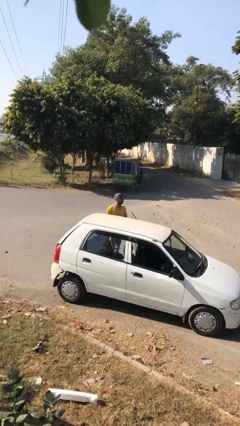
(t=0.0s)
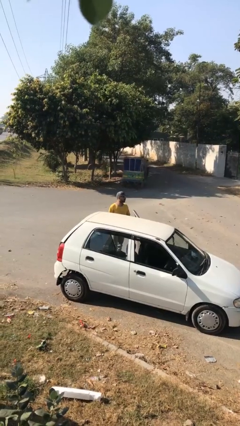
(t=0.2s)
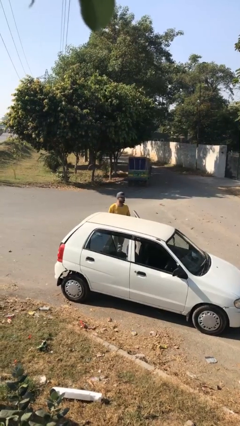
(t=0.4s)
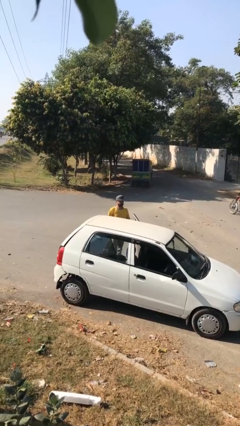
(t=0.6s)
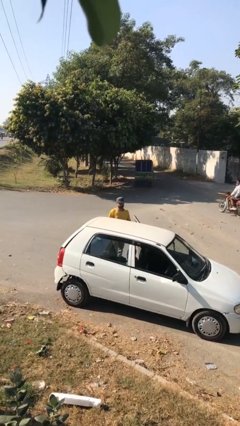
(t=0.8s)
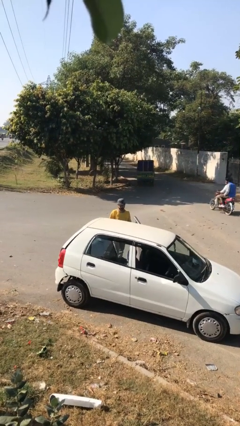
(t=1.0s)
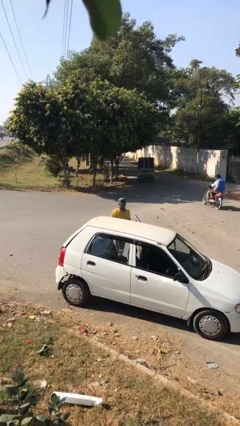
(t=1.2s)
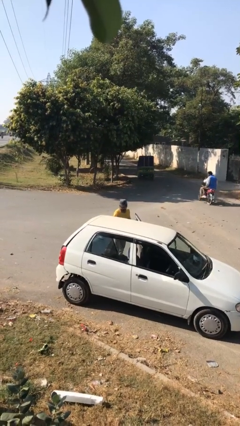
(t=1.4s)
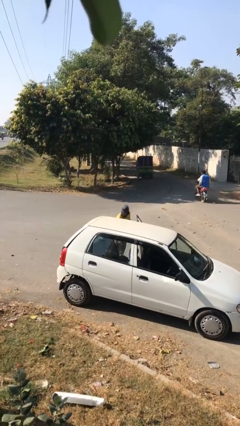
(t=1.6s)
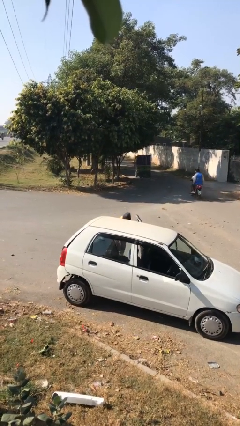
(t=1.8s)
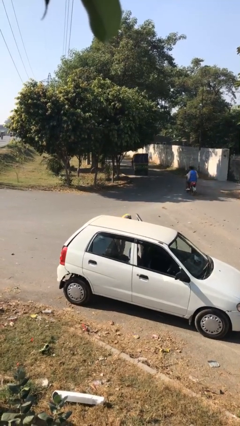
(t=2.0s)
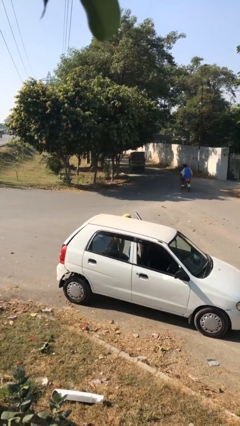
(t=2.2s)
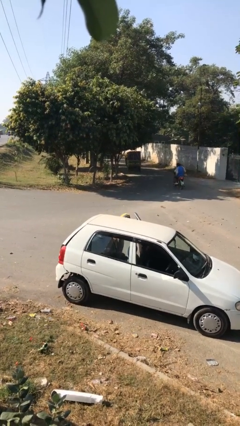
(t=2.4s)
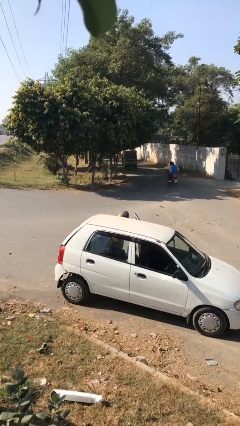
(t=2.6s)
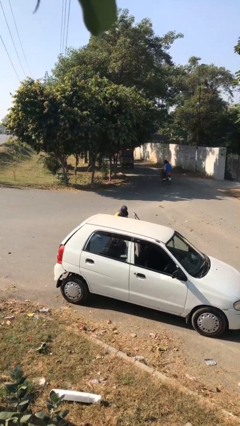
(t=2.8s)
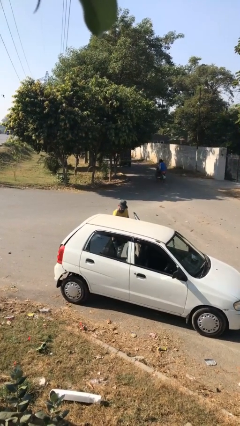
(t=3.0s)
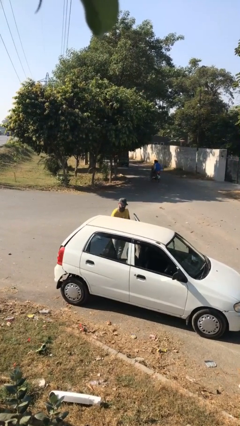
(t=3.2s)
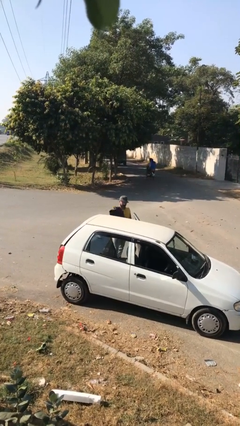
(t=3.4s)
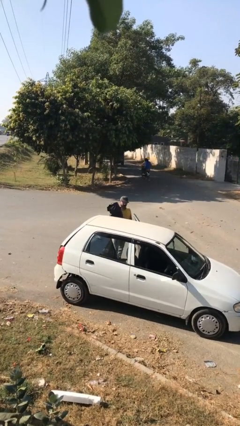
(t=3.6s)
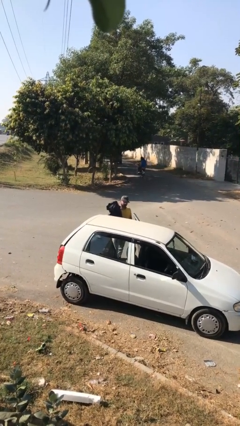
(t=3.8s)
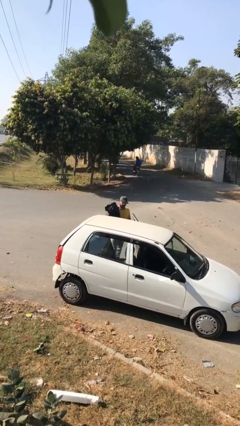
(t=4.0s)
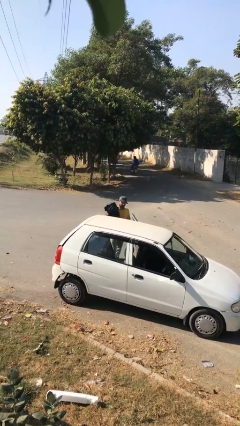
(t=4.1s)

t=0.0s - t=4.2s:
person unloads car

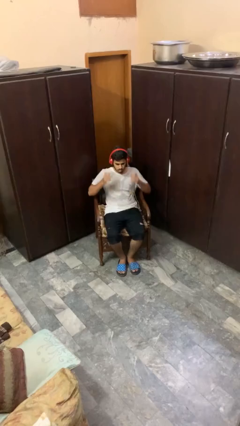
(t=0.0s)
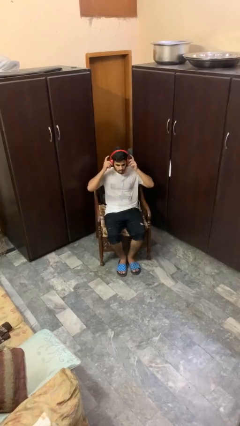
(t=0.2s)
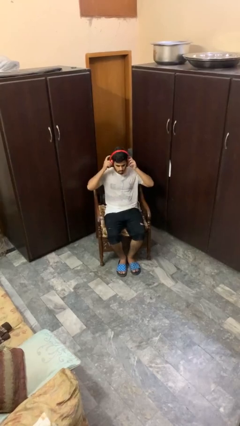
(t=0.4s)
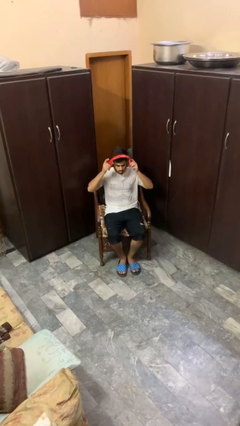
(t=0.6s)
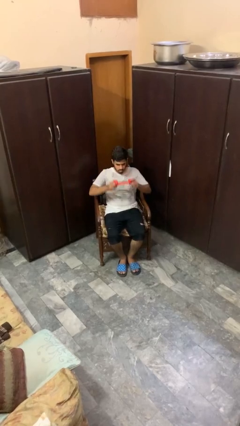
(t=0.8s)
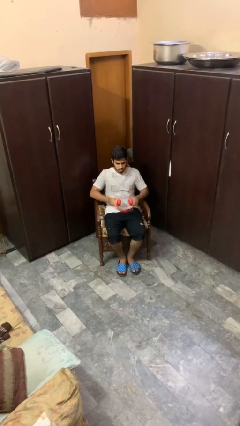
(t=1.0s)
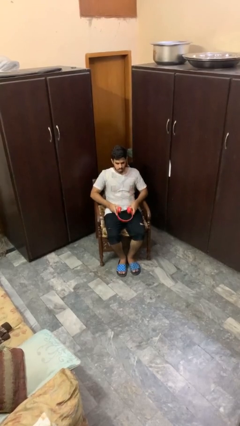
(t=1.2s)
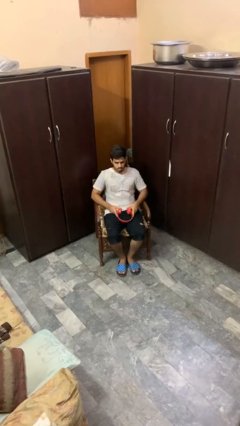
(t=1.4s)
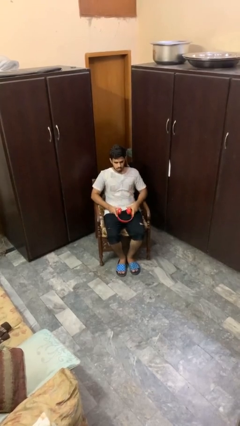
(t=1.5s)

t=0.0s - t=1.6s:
person takes off headphones

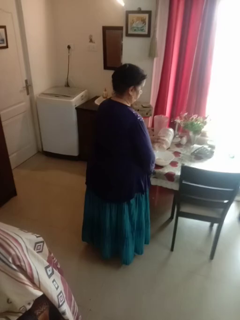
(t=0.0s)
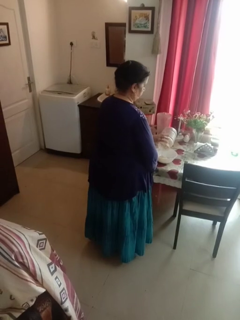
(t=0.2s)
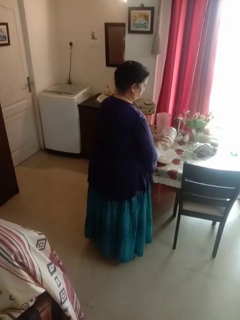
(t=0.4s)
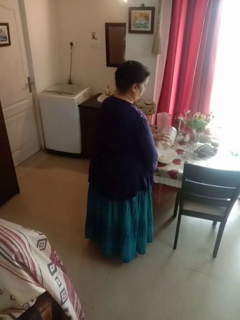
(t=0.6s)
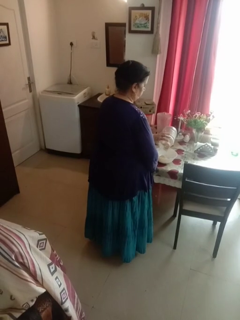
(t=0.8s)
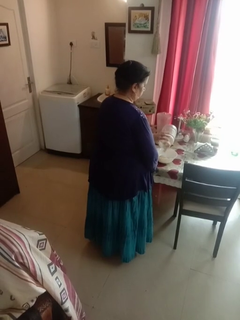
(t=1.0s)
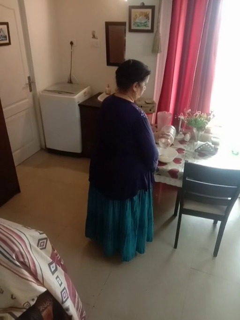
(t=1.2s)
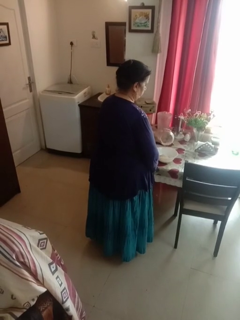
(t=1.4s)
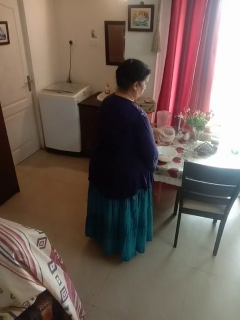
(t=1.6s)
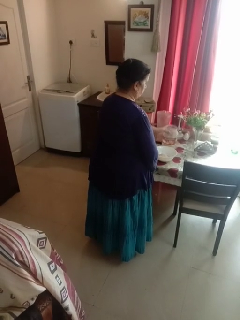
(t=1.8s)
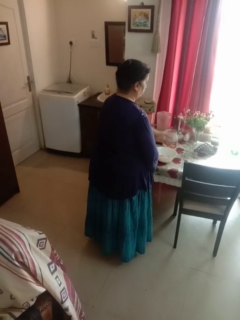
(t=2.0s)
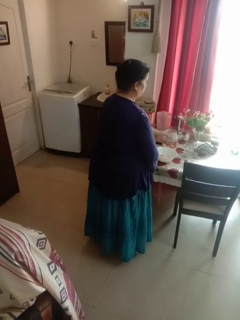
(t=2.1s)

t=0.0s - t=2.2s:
person pours into bowl

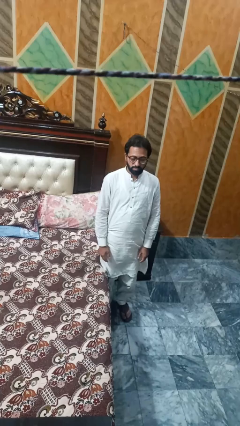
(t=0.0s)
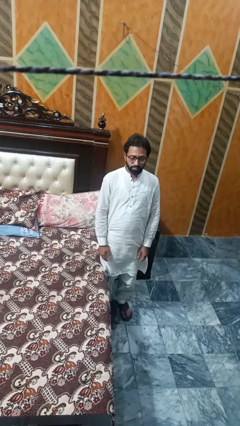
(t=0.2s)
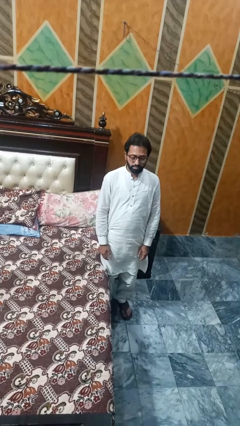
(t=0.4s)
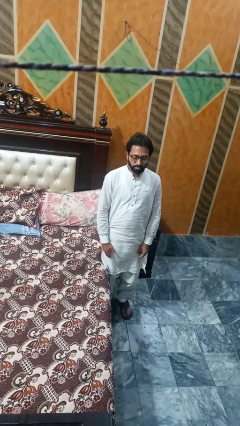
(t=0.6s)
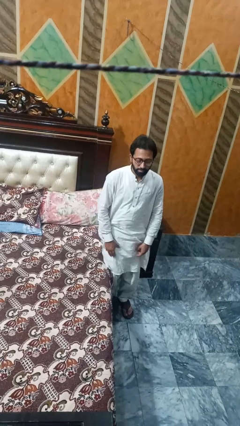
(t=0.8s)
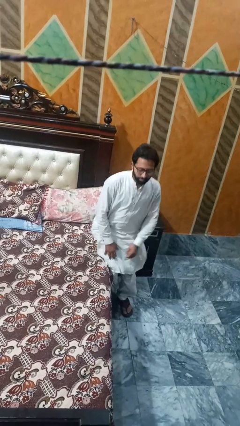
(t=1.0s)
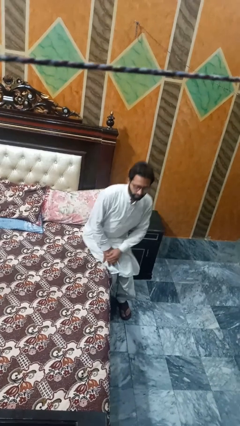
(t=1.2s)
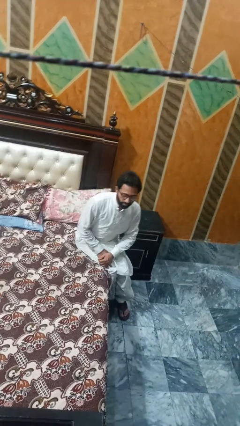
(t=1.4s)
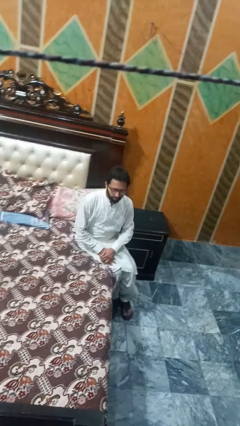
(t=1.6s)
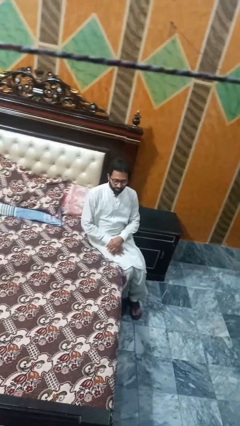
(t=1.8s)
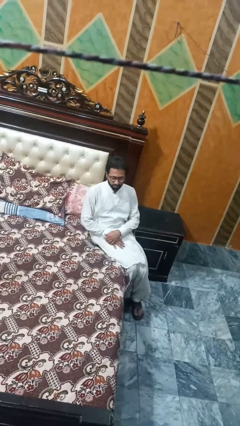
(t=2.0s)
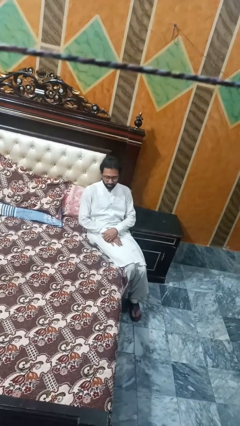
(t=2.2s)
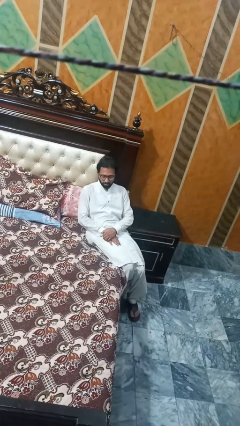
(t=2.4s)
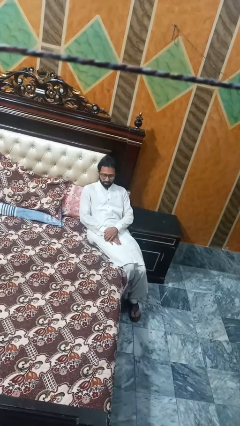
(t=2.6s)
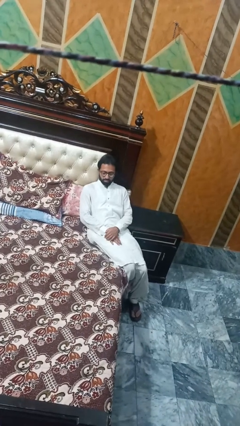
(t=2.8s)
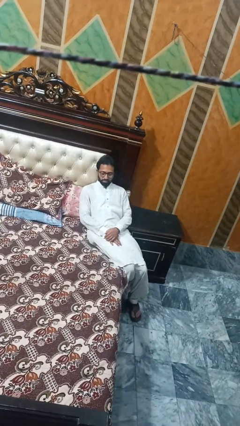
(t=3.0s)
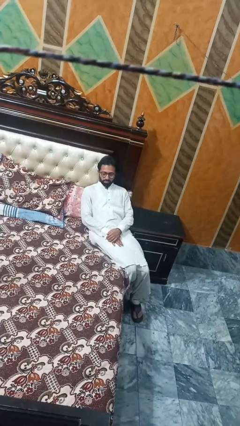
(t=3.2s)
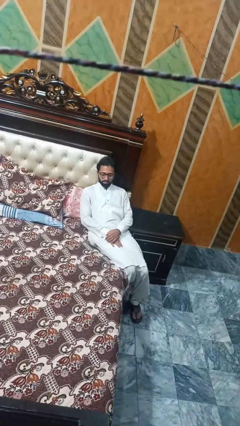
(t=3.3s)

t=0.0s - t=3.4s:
person lies down on bed

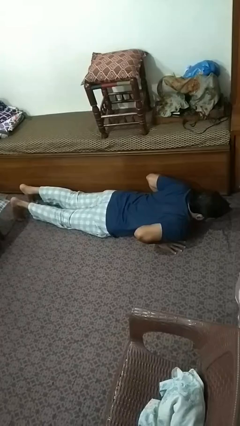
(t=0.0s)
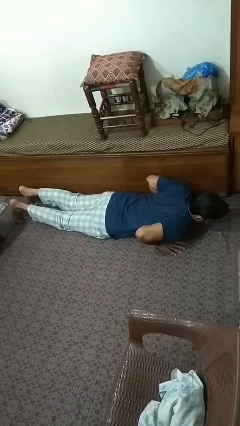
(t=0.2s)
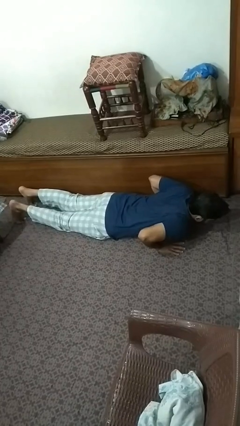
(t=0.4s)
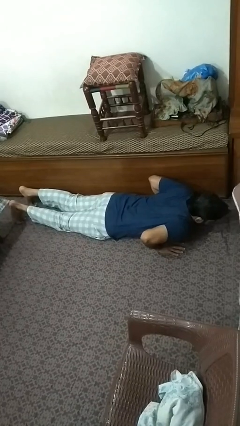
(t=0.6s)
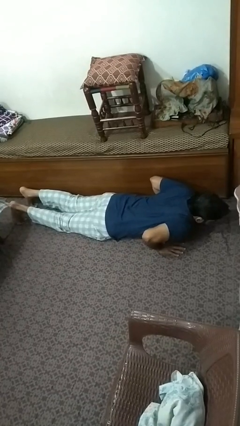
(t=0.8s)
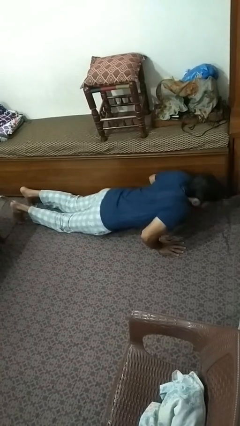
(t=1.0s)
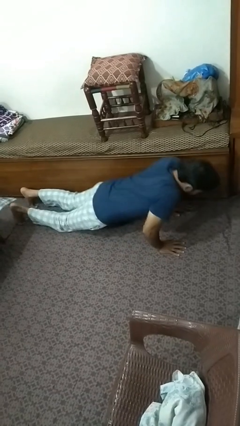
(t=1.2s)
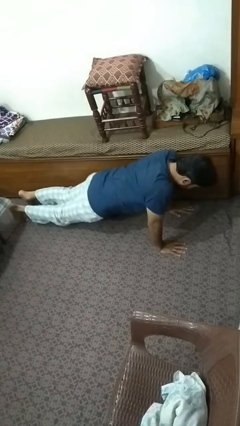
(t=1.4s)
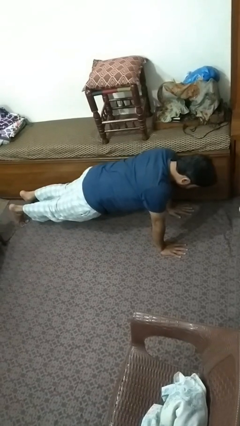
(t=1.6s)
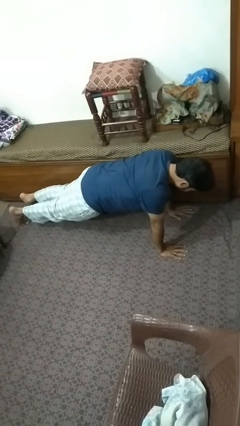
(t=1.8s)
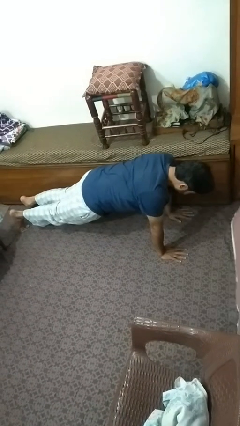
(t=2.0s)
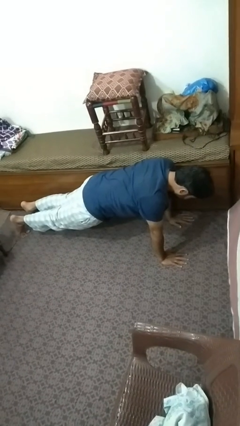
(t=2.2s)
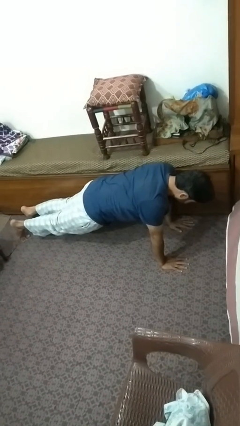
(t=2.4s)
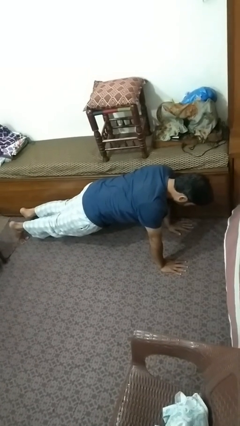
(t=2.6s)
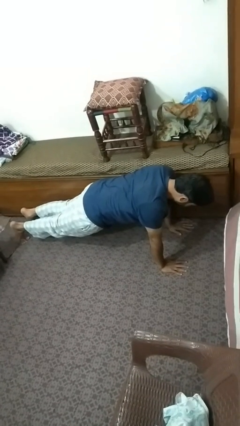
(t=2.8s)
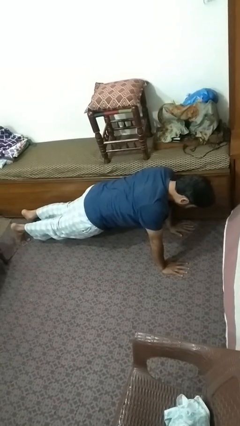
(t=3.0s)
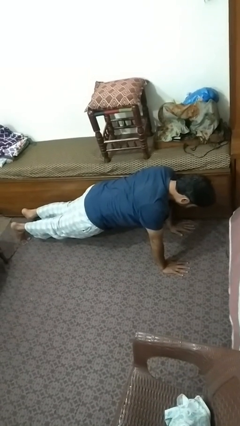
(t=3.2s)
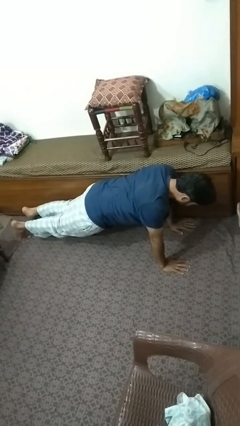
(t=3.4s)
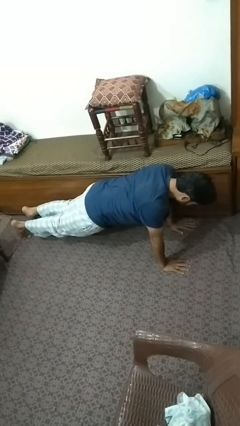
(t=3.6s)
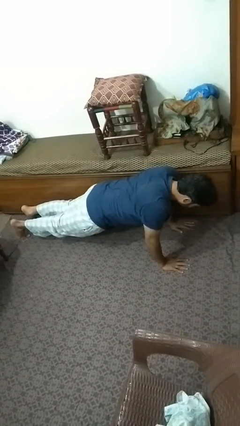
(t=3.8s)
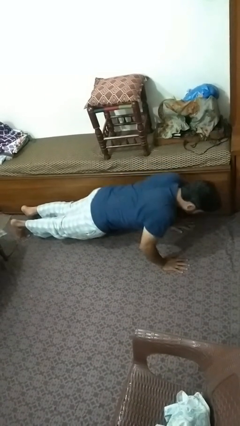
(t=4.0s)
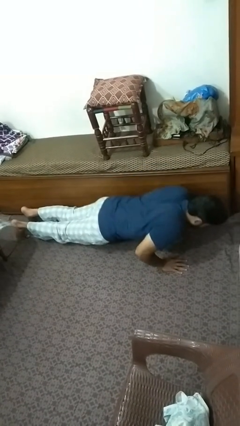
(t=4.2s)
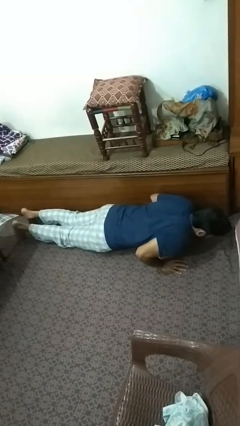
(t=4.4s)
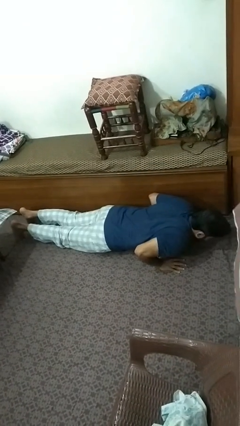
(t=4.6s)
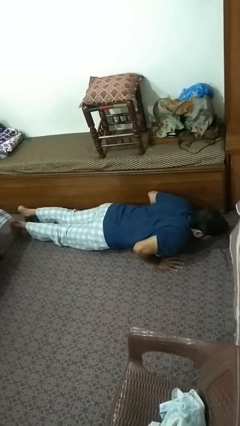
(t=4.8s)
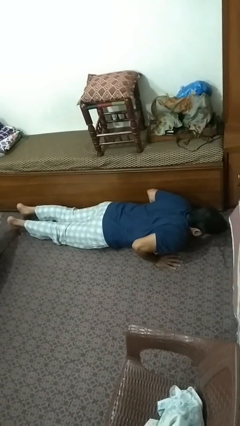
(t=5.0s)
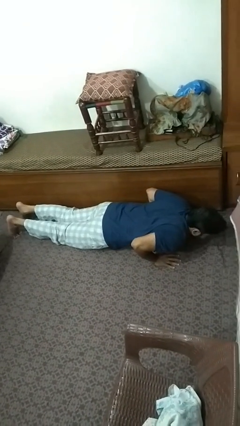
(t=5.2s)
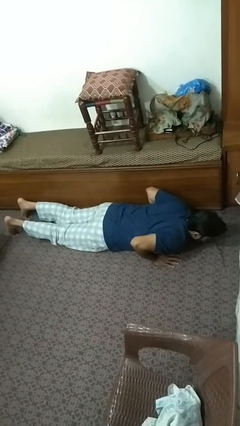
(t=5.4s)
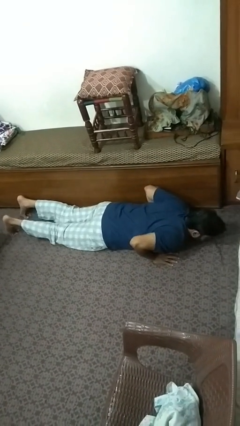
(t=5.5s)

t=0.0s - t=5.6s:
person exercises with pushup

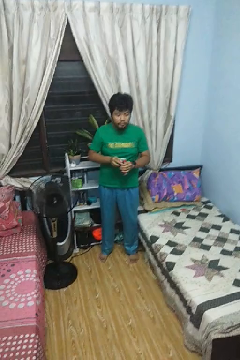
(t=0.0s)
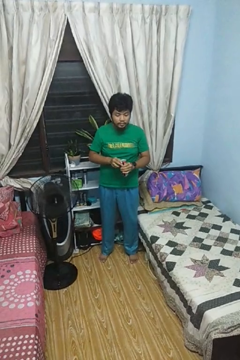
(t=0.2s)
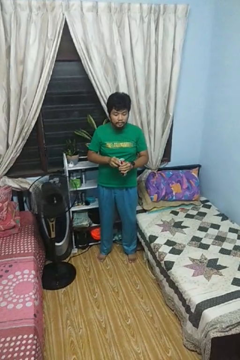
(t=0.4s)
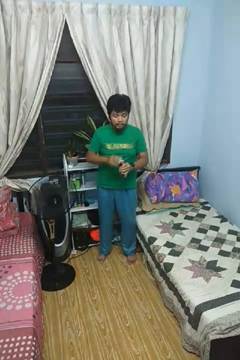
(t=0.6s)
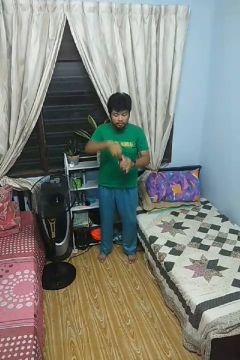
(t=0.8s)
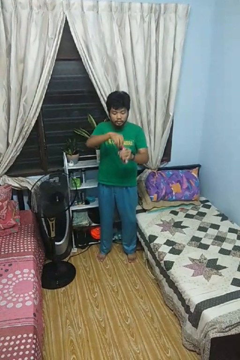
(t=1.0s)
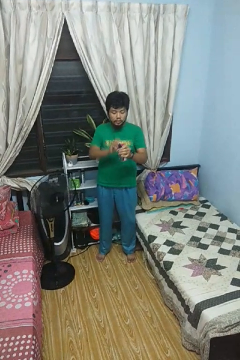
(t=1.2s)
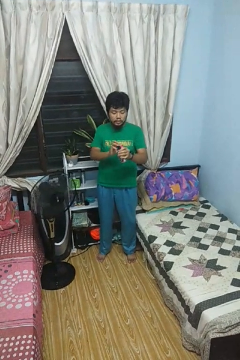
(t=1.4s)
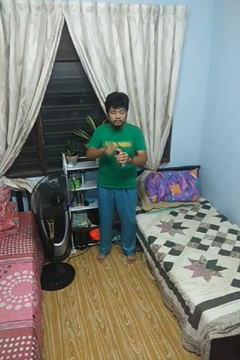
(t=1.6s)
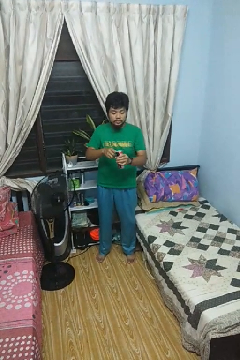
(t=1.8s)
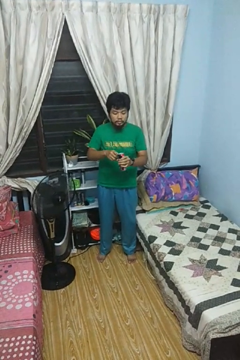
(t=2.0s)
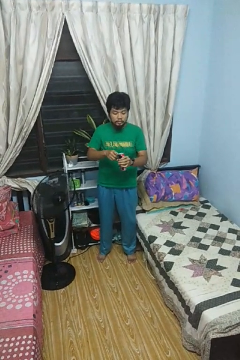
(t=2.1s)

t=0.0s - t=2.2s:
person opens beverage can
